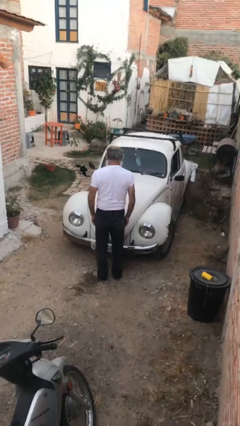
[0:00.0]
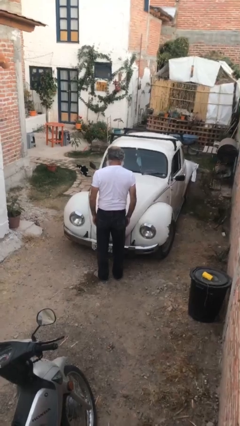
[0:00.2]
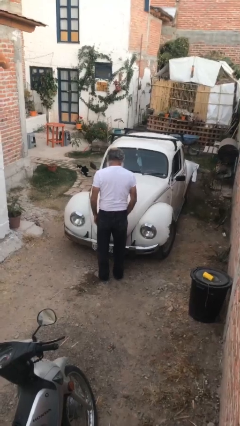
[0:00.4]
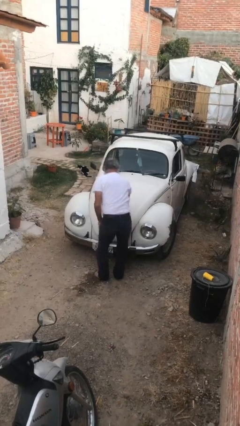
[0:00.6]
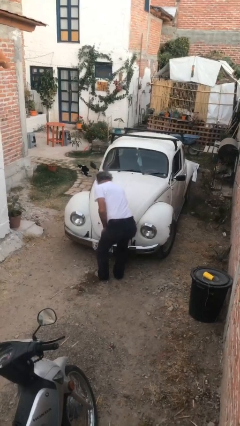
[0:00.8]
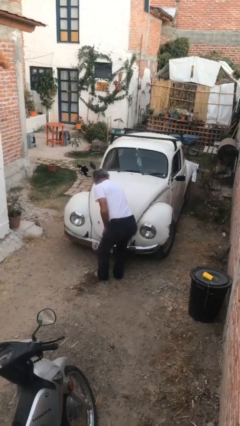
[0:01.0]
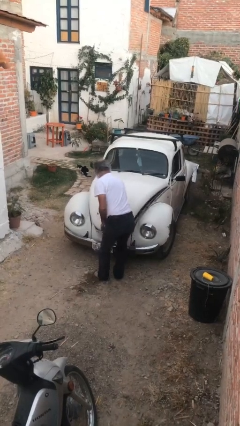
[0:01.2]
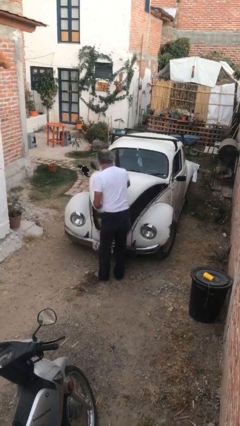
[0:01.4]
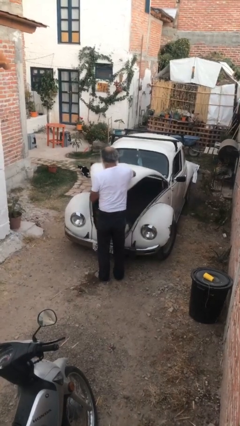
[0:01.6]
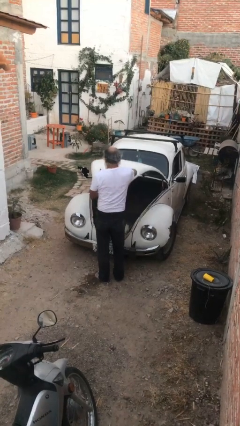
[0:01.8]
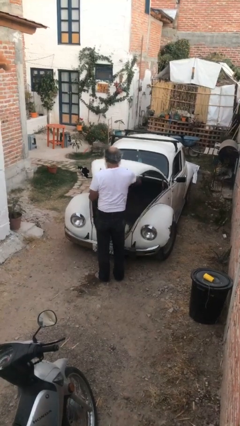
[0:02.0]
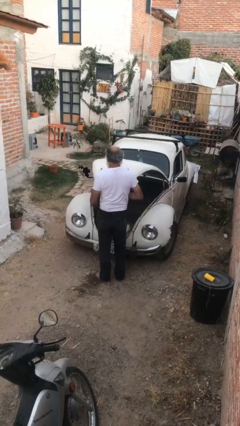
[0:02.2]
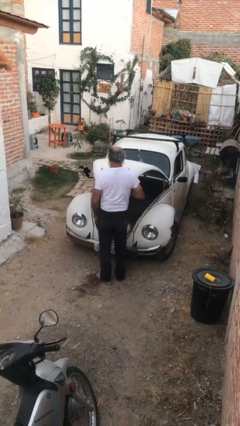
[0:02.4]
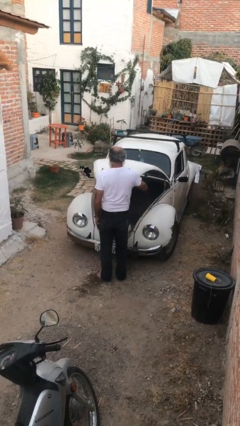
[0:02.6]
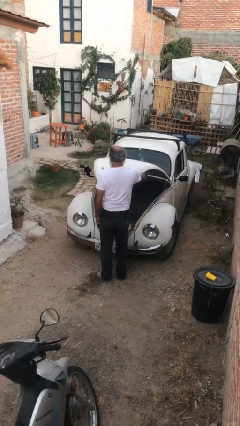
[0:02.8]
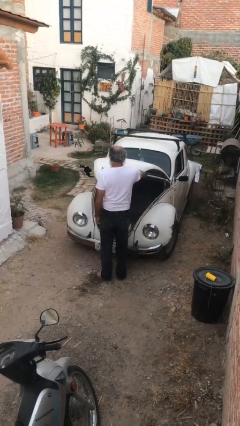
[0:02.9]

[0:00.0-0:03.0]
person opens car trunk

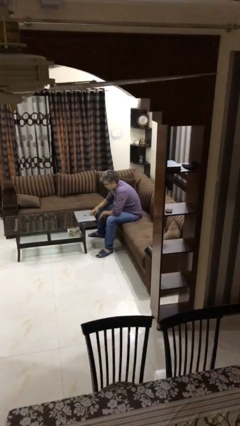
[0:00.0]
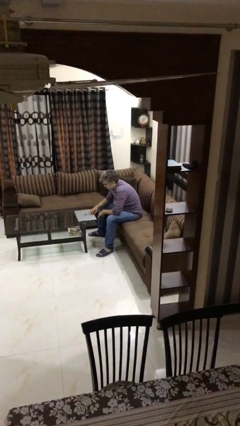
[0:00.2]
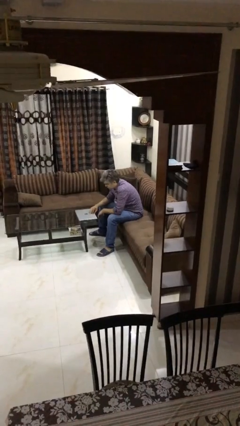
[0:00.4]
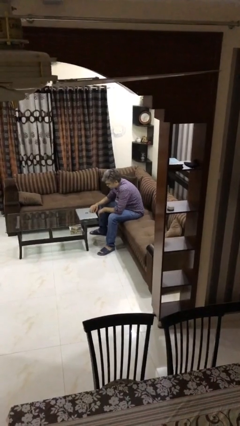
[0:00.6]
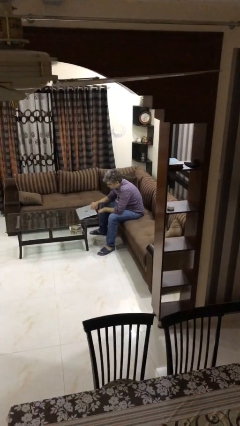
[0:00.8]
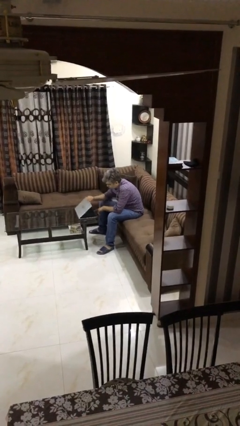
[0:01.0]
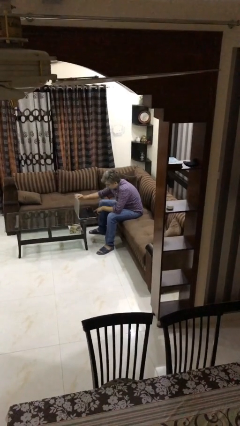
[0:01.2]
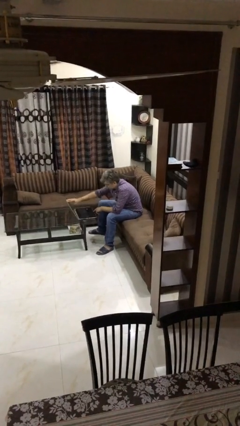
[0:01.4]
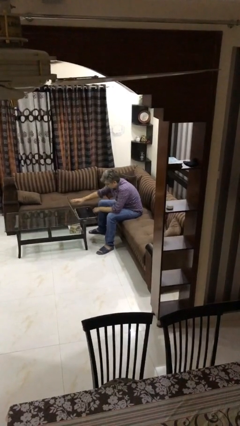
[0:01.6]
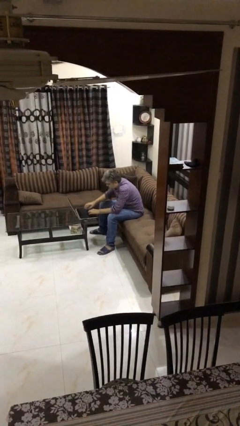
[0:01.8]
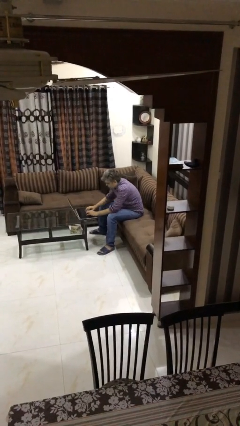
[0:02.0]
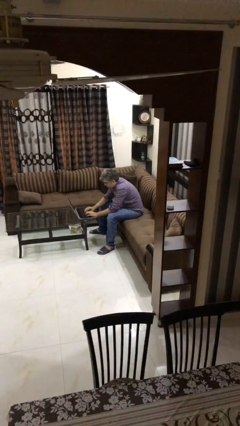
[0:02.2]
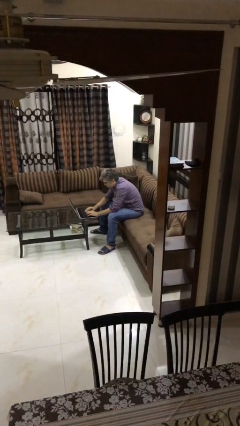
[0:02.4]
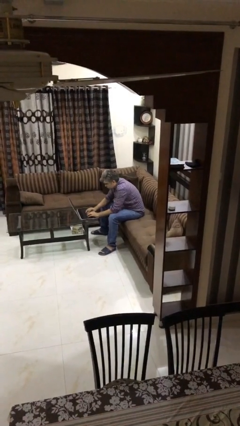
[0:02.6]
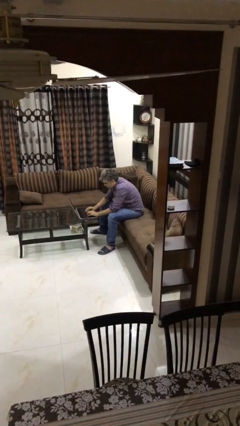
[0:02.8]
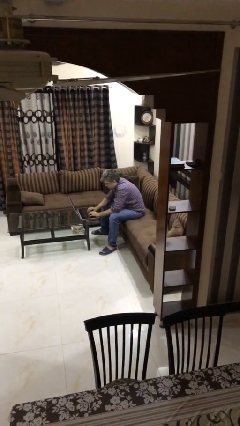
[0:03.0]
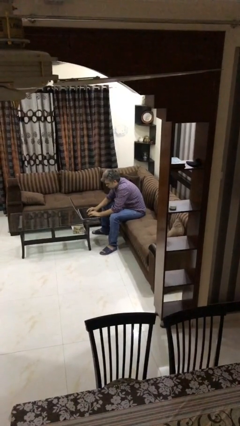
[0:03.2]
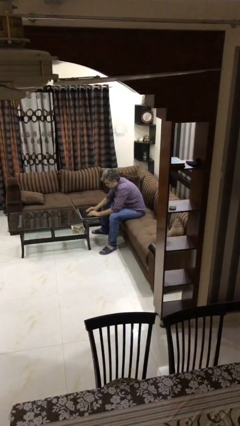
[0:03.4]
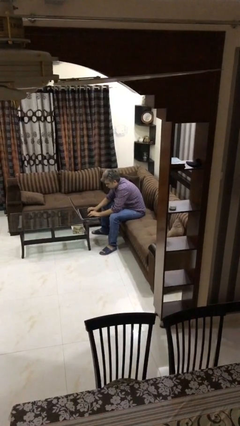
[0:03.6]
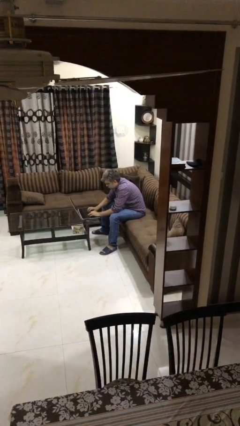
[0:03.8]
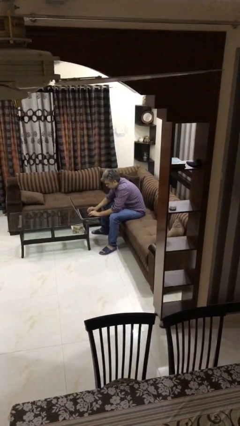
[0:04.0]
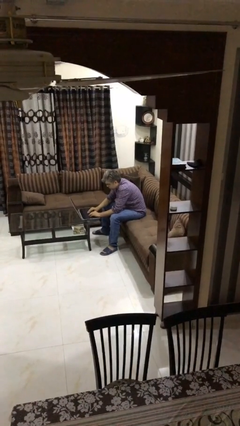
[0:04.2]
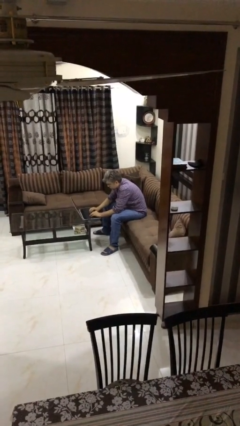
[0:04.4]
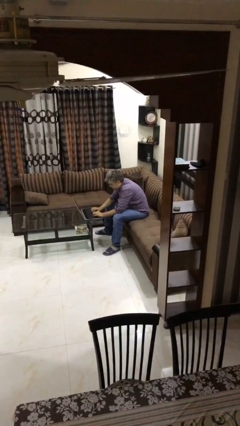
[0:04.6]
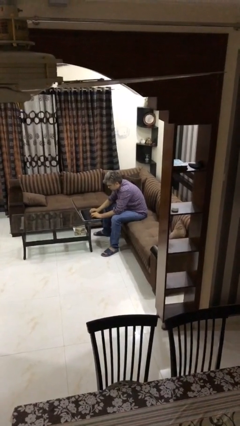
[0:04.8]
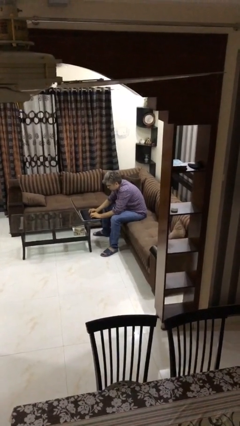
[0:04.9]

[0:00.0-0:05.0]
person interacts with laptop

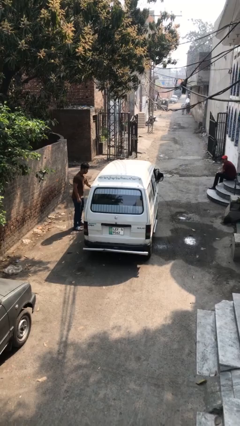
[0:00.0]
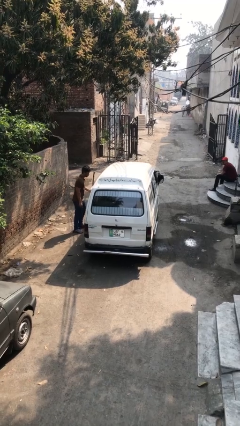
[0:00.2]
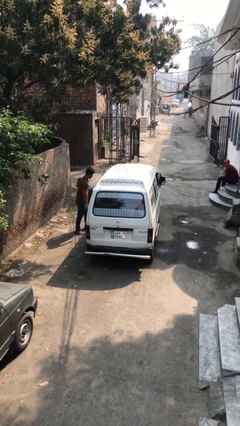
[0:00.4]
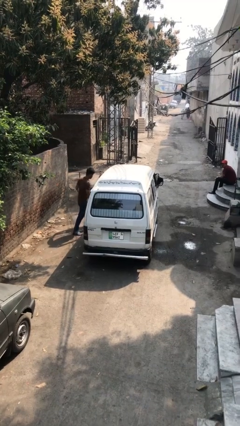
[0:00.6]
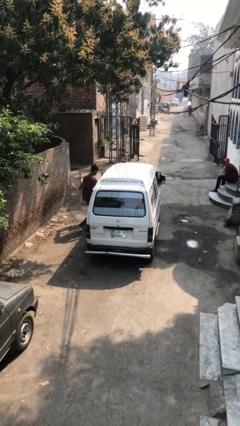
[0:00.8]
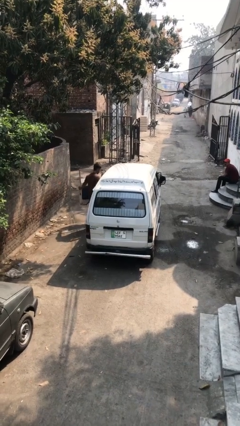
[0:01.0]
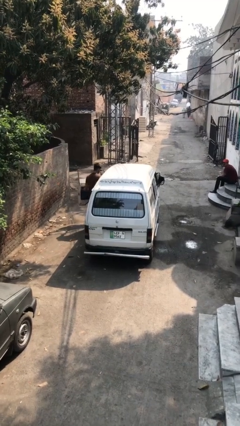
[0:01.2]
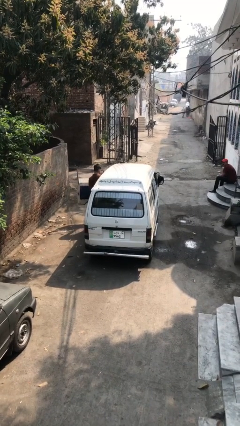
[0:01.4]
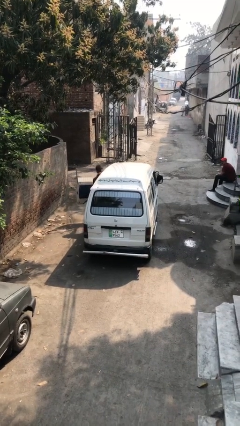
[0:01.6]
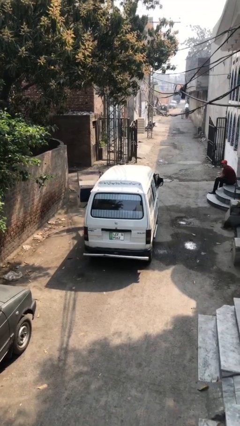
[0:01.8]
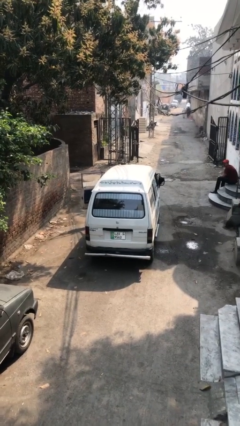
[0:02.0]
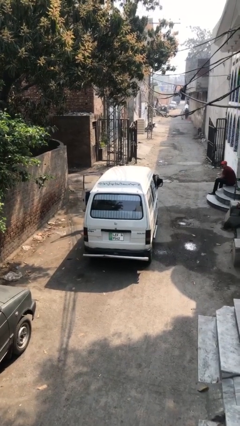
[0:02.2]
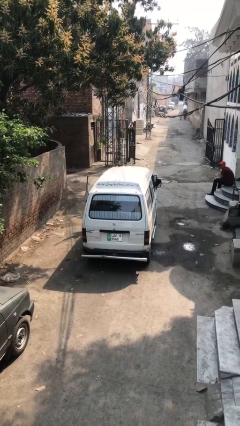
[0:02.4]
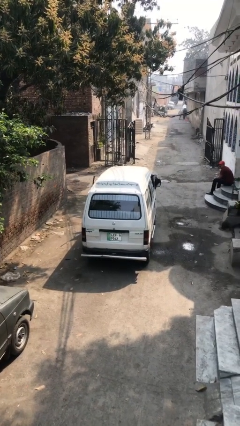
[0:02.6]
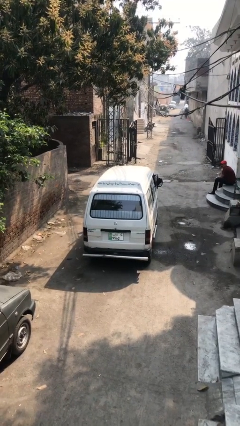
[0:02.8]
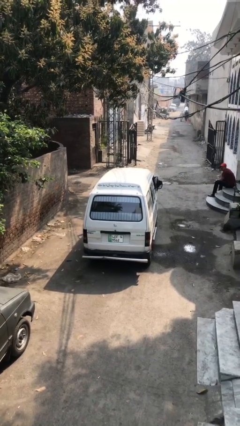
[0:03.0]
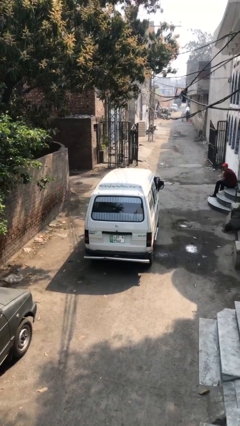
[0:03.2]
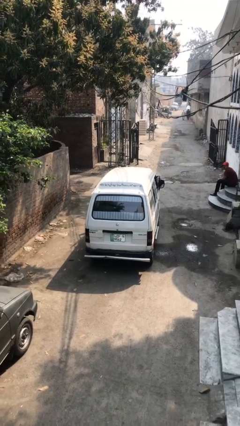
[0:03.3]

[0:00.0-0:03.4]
car picks up person

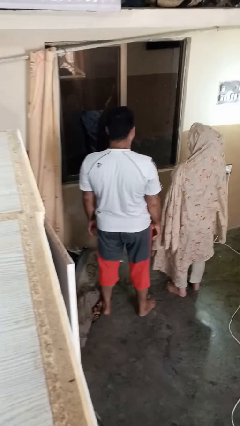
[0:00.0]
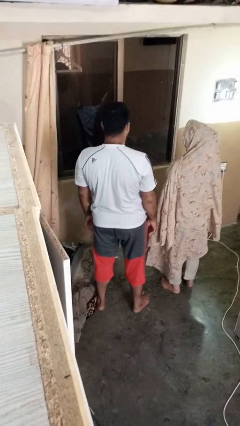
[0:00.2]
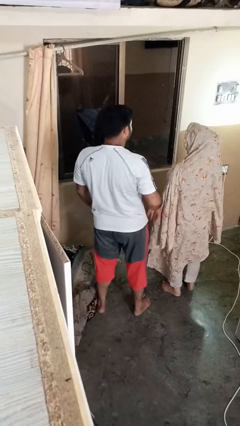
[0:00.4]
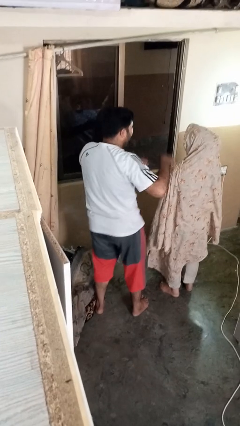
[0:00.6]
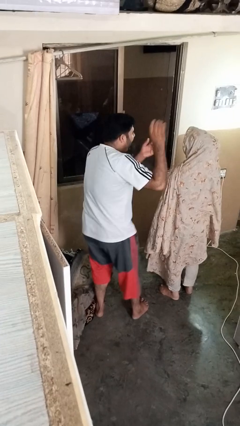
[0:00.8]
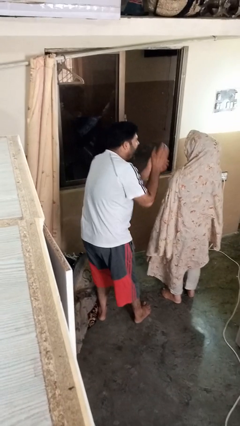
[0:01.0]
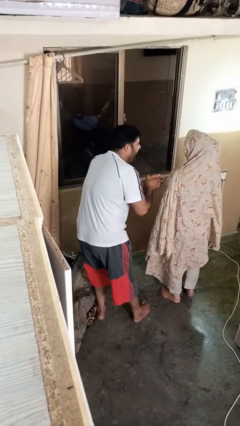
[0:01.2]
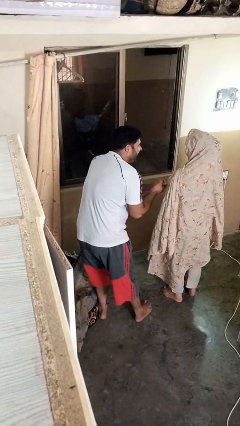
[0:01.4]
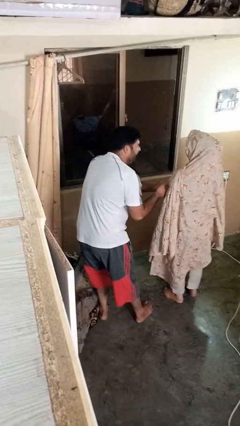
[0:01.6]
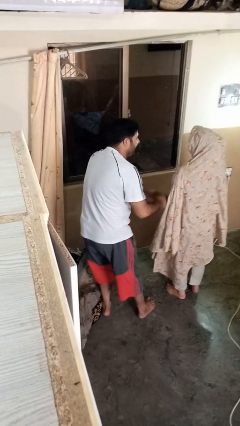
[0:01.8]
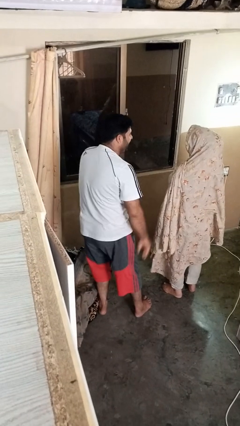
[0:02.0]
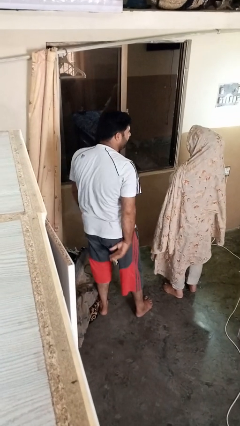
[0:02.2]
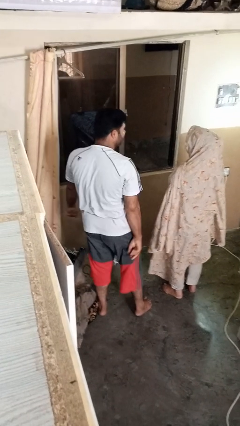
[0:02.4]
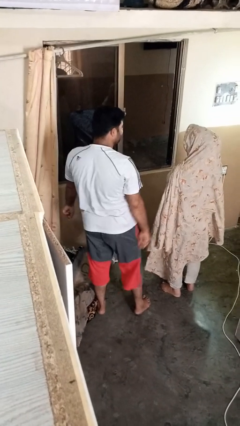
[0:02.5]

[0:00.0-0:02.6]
person laughs with person

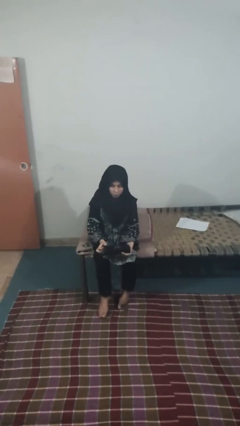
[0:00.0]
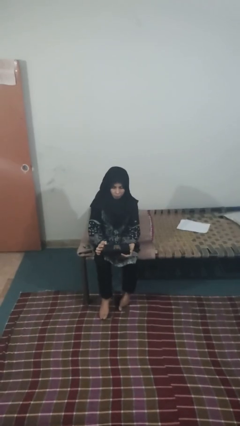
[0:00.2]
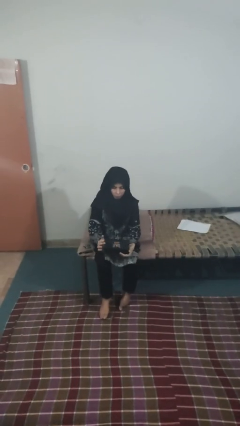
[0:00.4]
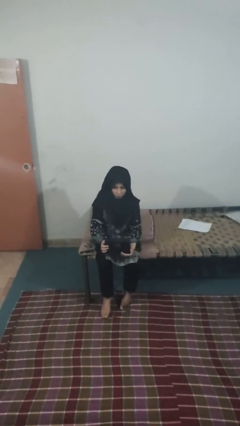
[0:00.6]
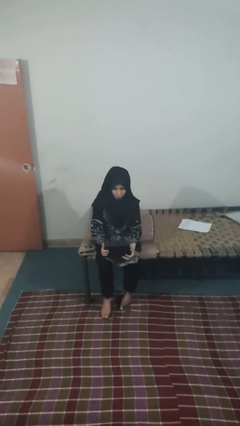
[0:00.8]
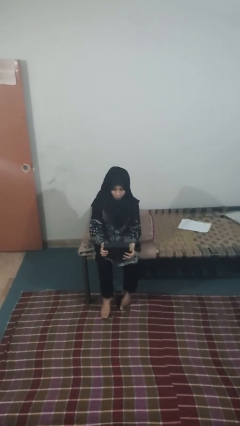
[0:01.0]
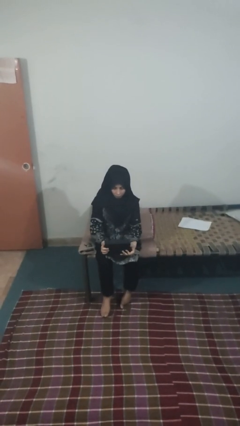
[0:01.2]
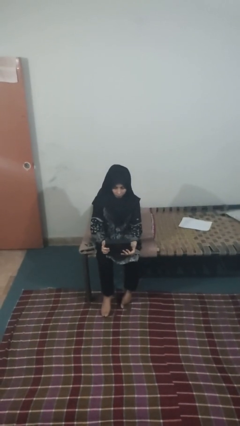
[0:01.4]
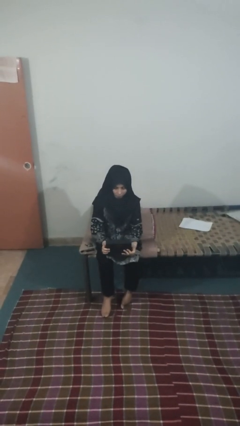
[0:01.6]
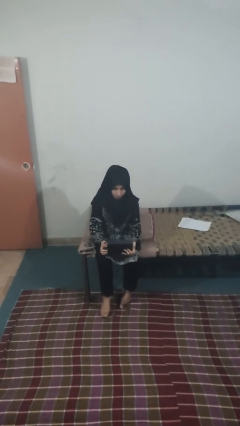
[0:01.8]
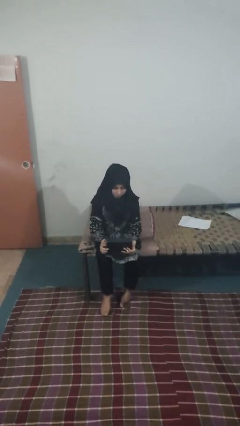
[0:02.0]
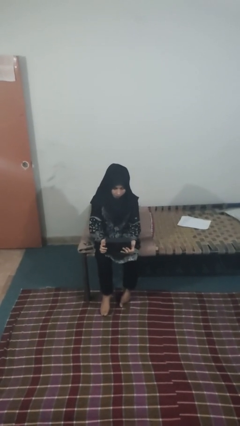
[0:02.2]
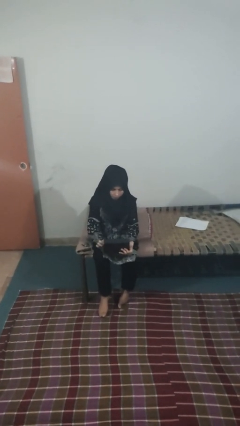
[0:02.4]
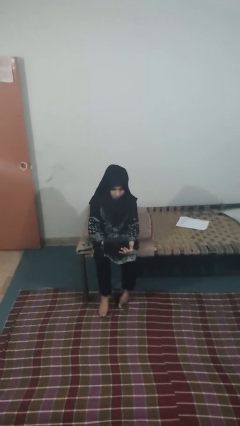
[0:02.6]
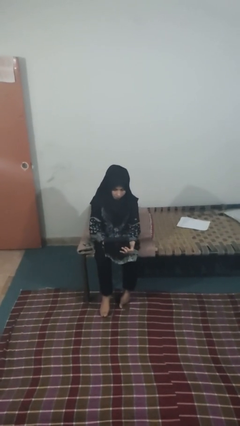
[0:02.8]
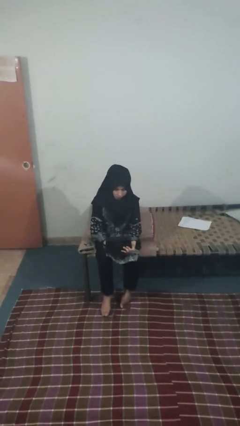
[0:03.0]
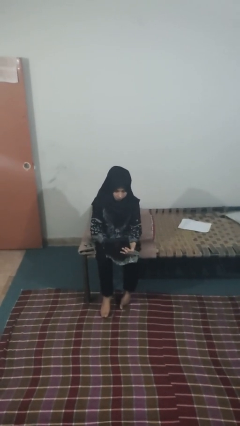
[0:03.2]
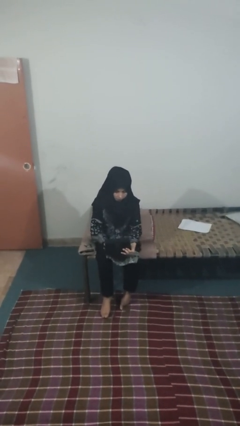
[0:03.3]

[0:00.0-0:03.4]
person opens jewelry box
